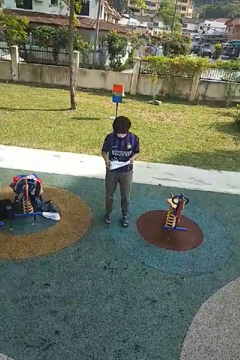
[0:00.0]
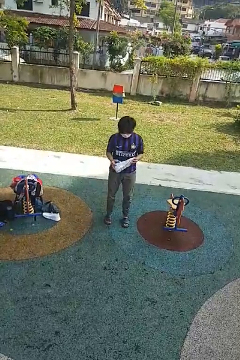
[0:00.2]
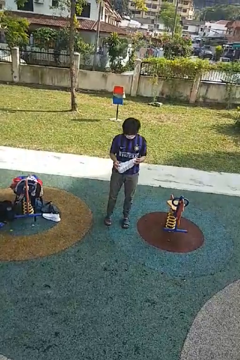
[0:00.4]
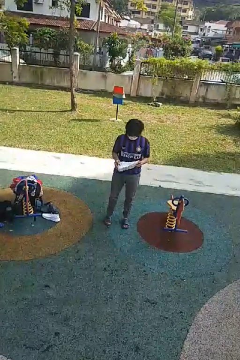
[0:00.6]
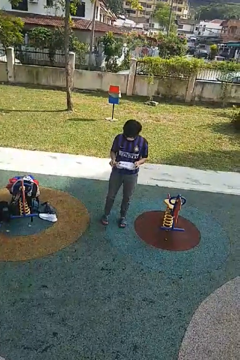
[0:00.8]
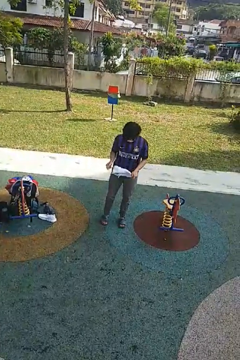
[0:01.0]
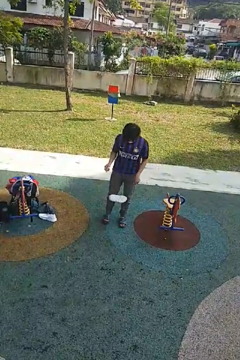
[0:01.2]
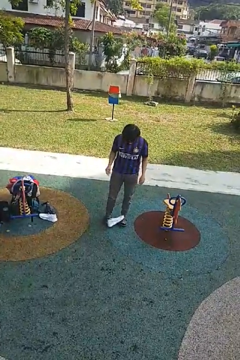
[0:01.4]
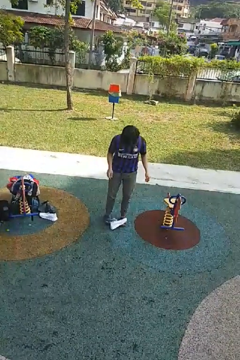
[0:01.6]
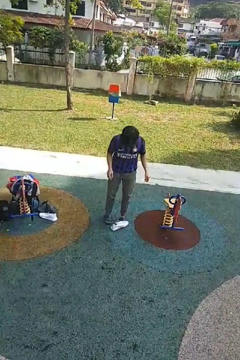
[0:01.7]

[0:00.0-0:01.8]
person drops object

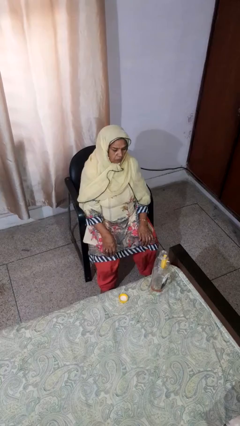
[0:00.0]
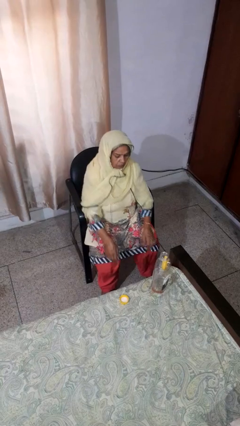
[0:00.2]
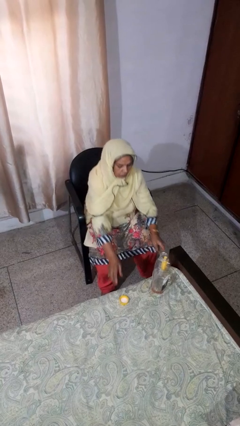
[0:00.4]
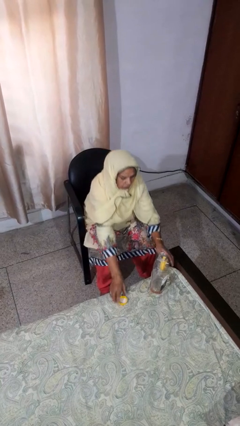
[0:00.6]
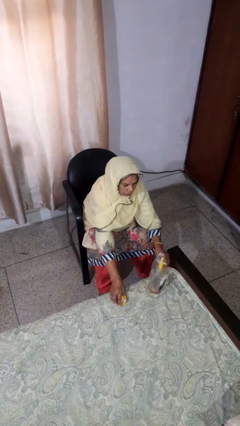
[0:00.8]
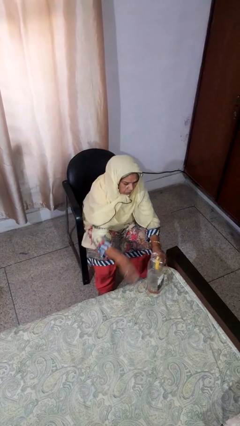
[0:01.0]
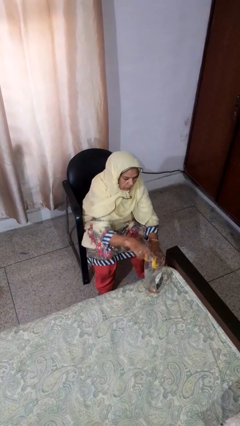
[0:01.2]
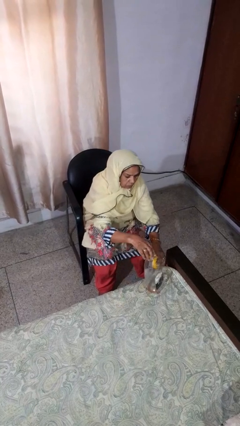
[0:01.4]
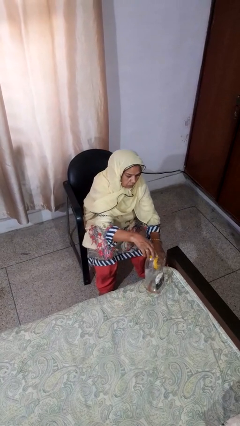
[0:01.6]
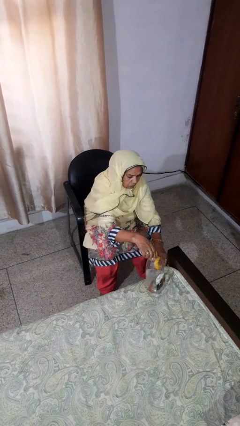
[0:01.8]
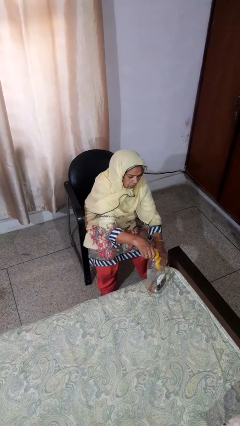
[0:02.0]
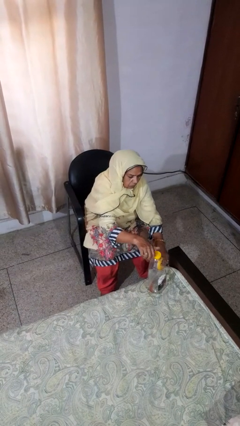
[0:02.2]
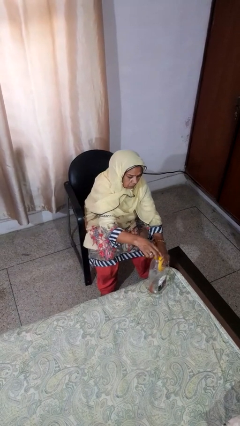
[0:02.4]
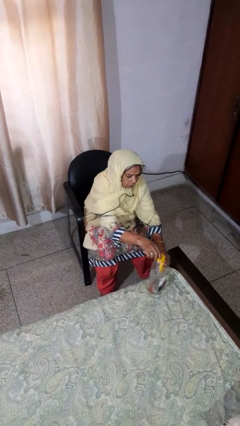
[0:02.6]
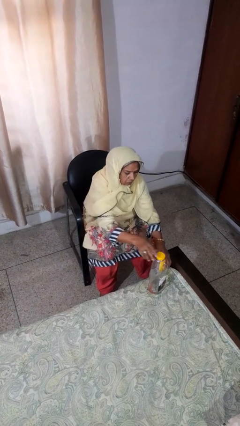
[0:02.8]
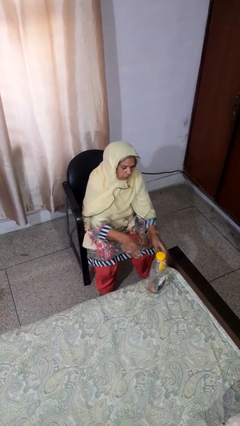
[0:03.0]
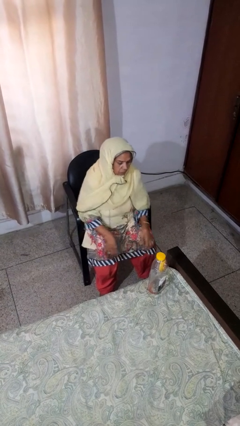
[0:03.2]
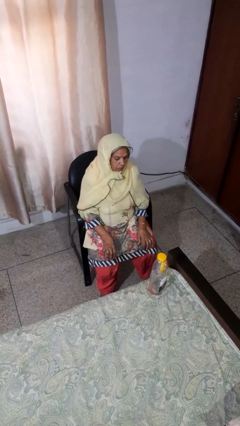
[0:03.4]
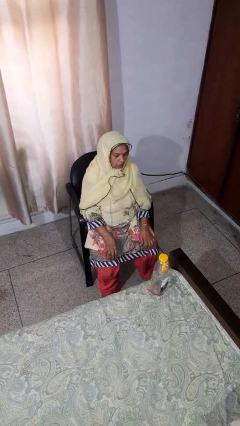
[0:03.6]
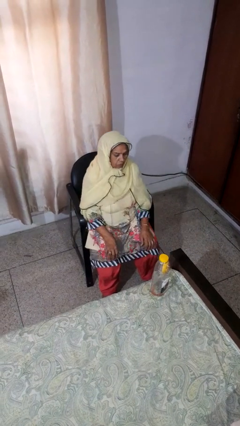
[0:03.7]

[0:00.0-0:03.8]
person screws lid to bottle

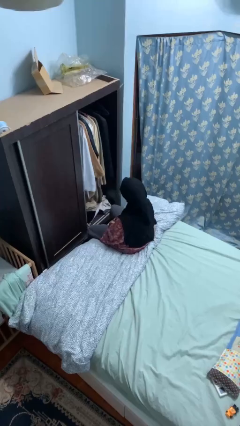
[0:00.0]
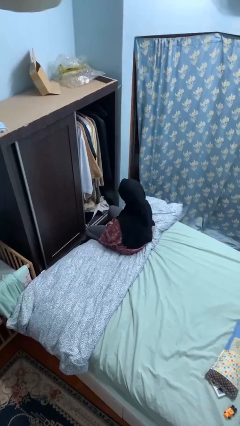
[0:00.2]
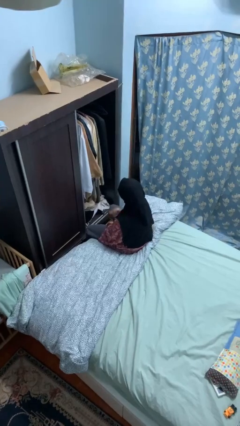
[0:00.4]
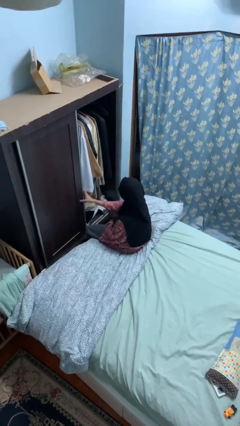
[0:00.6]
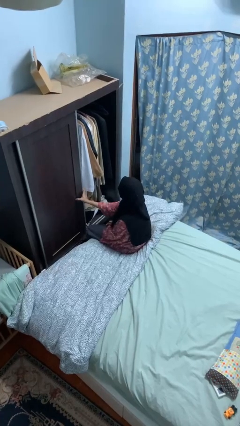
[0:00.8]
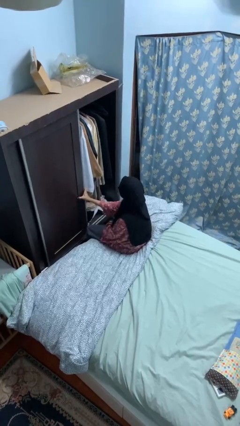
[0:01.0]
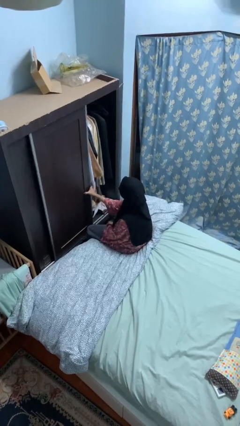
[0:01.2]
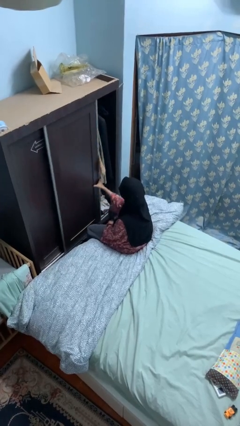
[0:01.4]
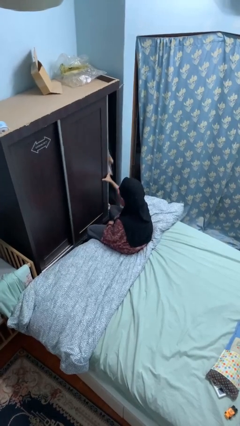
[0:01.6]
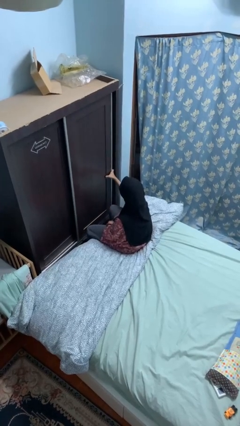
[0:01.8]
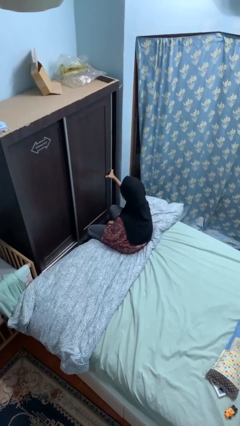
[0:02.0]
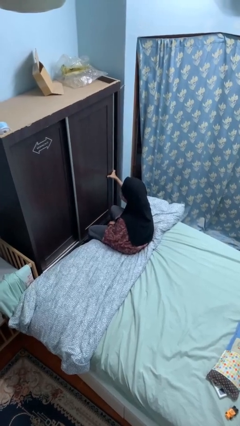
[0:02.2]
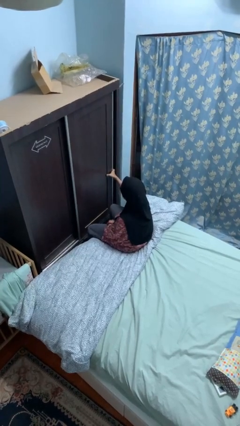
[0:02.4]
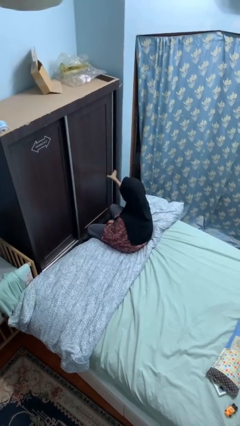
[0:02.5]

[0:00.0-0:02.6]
person closes closet door

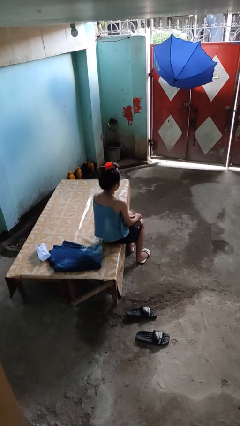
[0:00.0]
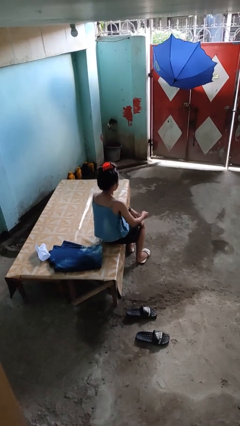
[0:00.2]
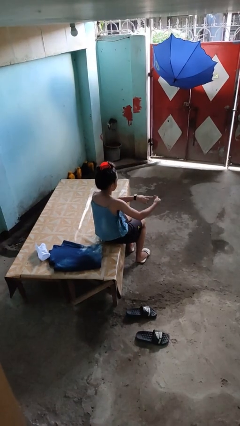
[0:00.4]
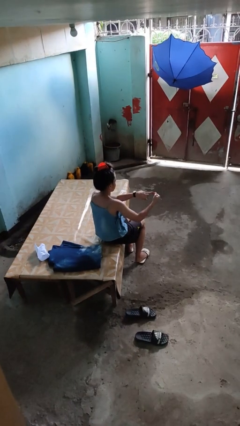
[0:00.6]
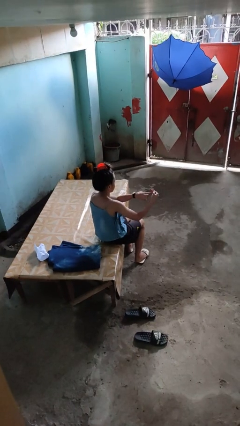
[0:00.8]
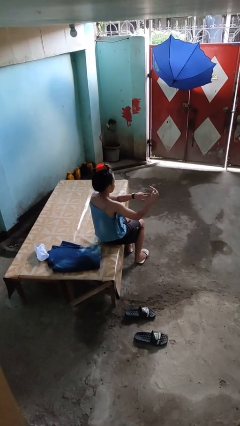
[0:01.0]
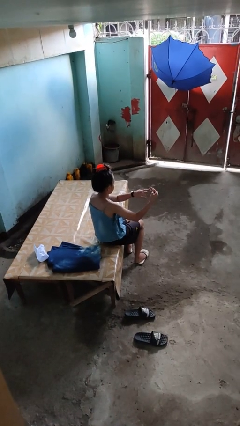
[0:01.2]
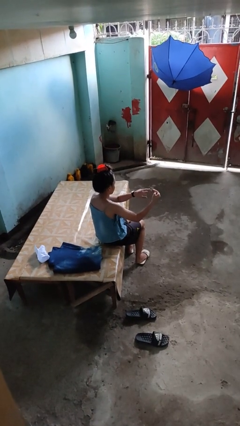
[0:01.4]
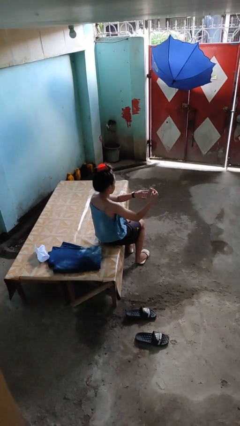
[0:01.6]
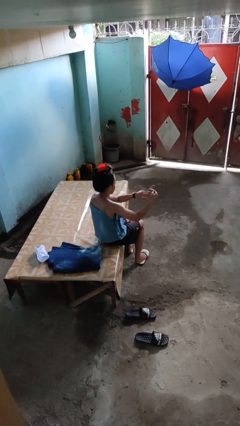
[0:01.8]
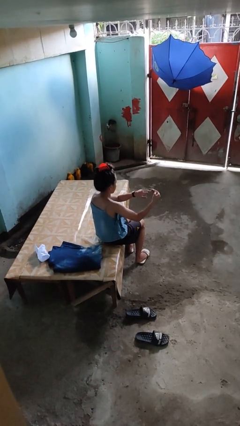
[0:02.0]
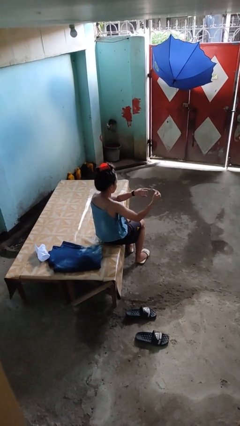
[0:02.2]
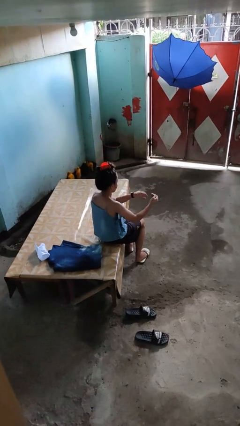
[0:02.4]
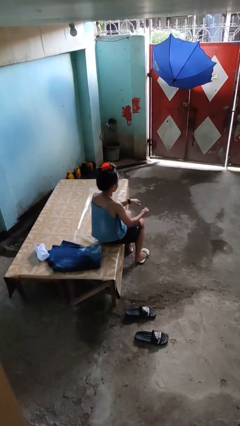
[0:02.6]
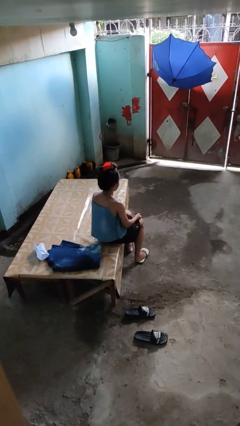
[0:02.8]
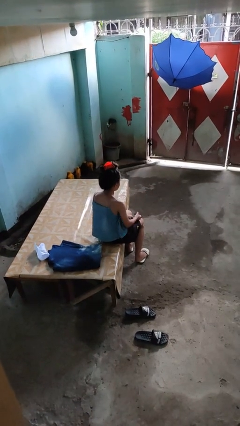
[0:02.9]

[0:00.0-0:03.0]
person files fingernails

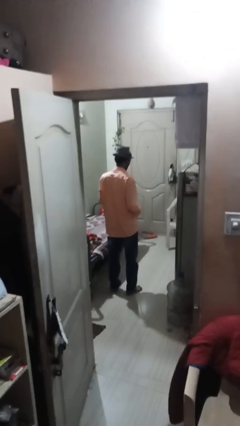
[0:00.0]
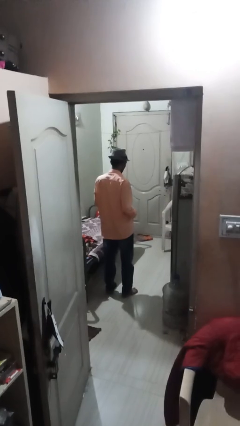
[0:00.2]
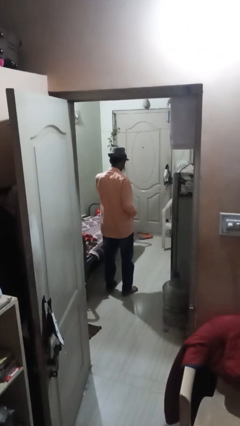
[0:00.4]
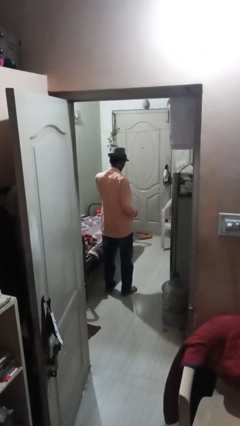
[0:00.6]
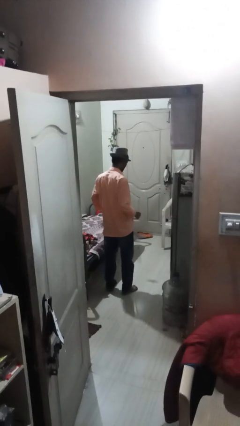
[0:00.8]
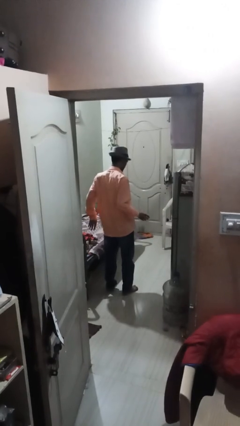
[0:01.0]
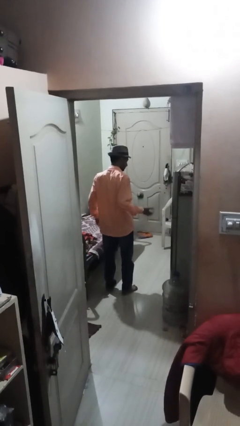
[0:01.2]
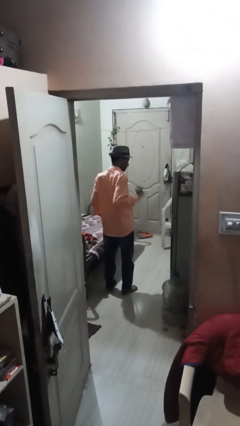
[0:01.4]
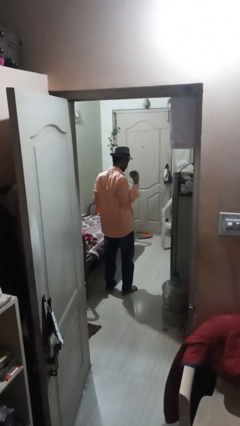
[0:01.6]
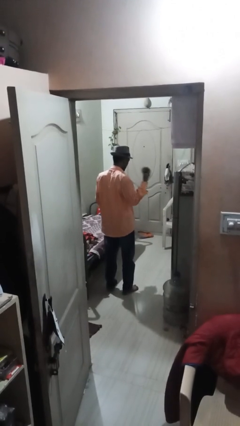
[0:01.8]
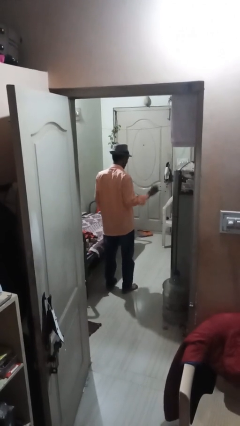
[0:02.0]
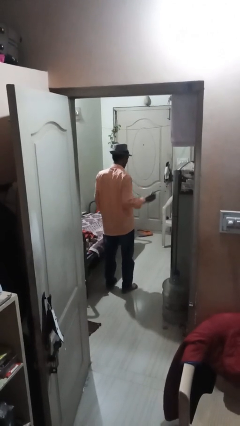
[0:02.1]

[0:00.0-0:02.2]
person bounces ball on floor
